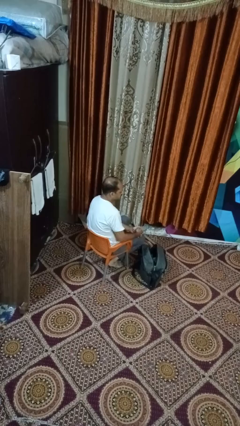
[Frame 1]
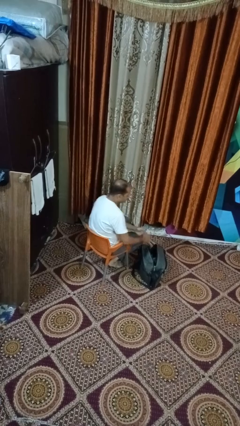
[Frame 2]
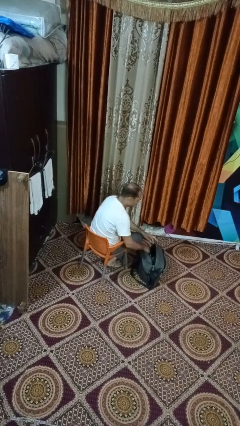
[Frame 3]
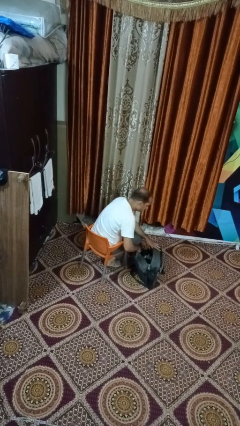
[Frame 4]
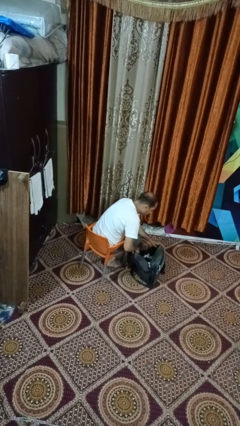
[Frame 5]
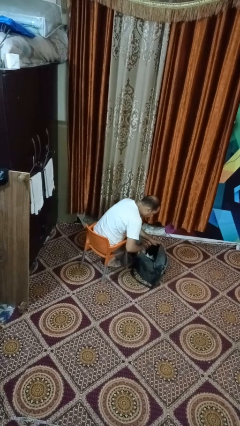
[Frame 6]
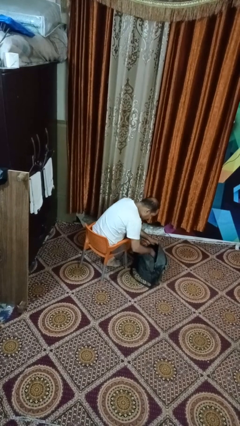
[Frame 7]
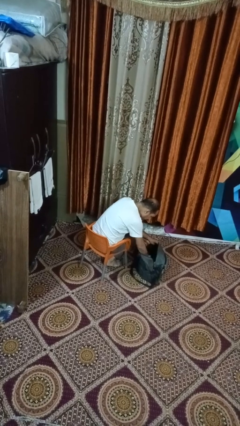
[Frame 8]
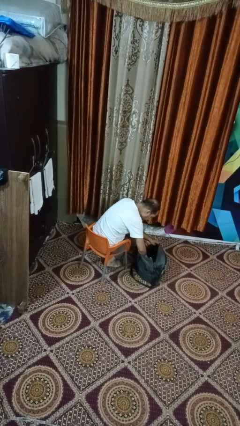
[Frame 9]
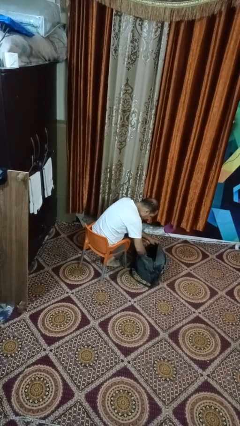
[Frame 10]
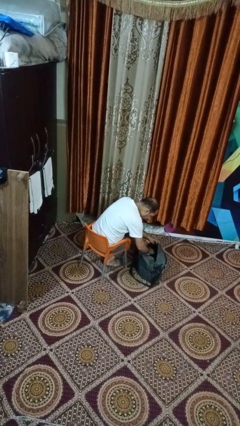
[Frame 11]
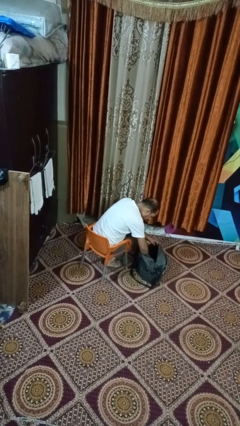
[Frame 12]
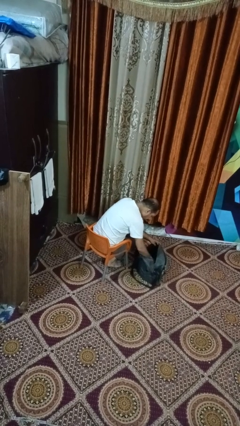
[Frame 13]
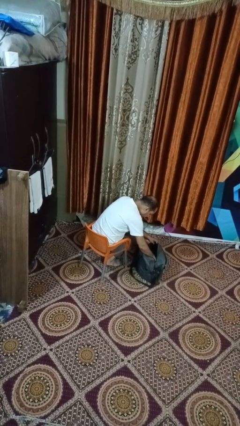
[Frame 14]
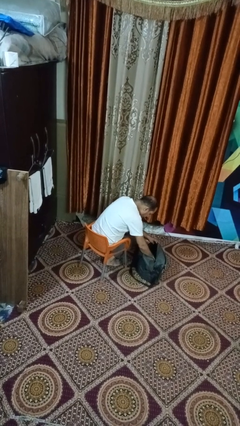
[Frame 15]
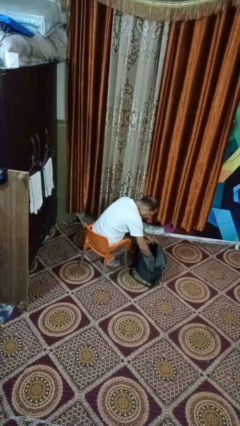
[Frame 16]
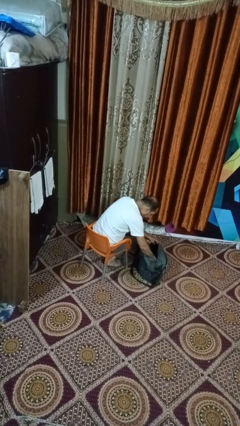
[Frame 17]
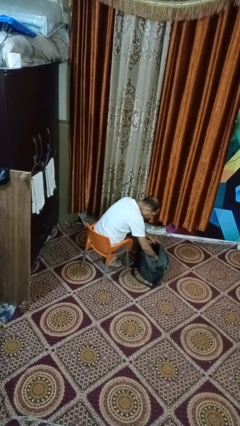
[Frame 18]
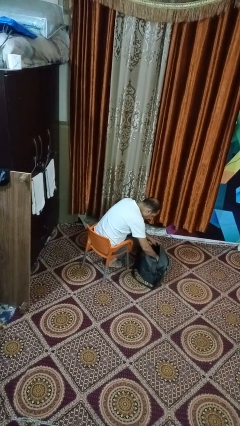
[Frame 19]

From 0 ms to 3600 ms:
person searches in backpack

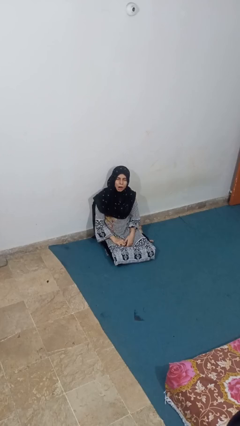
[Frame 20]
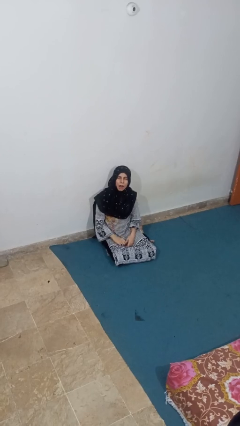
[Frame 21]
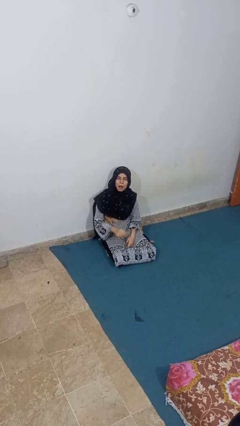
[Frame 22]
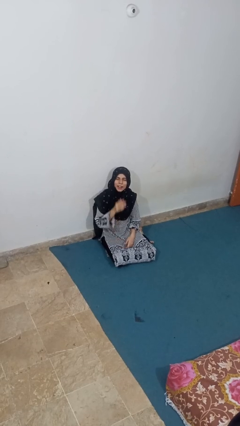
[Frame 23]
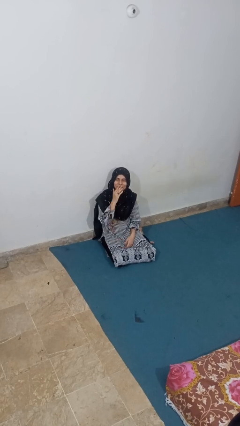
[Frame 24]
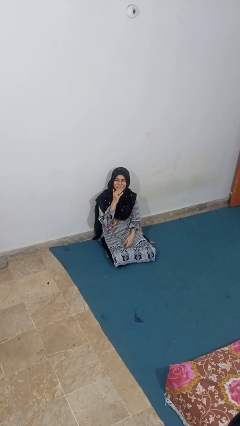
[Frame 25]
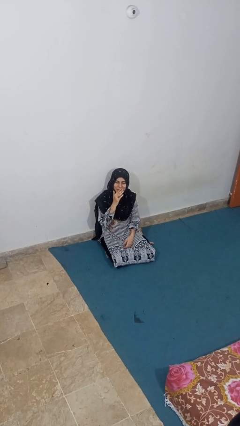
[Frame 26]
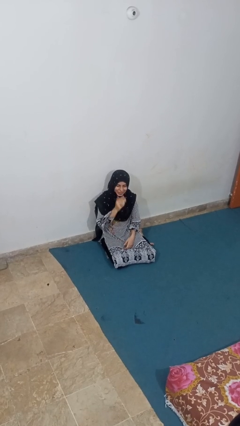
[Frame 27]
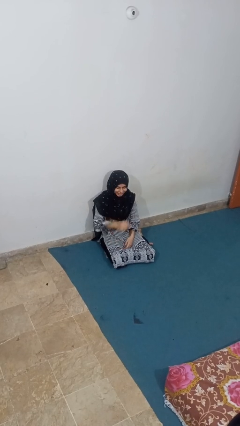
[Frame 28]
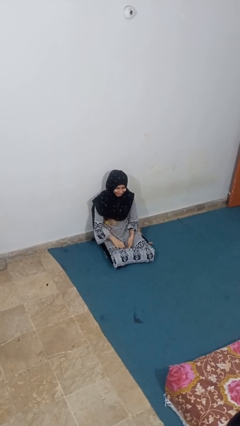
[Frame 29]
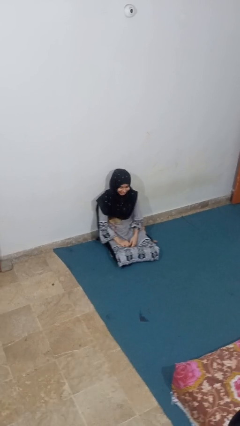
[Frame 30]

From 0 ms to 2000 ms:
person yawns

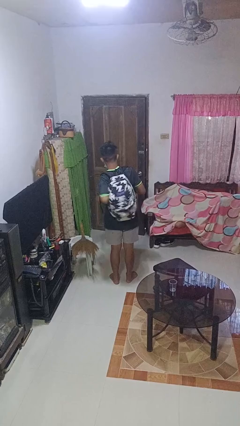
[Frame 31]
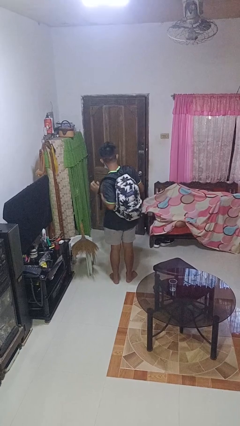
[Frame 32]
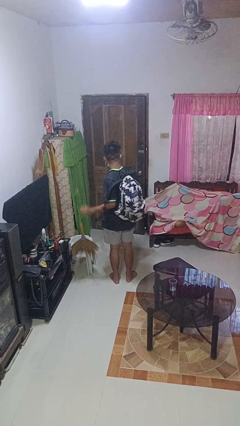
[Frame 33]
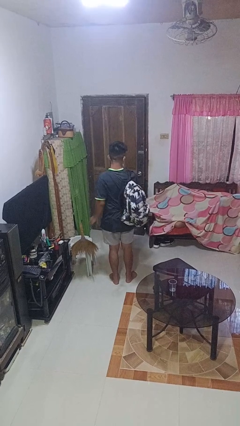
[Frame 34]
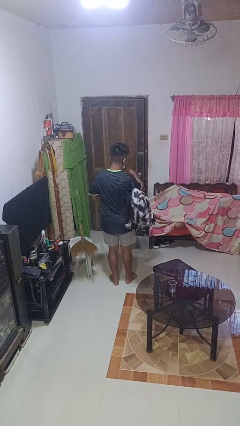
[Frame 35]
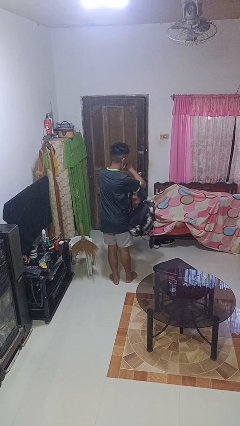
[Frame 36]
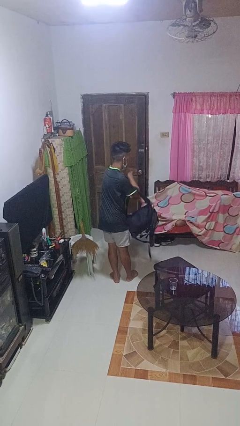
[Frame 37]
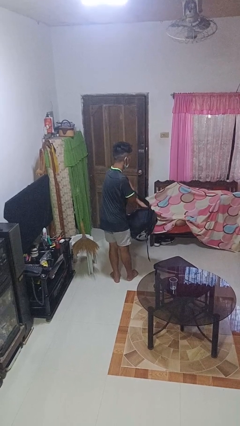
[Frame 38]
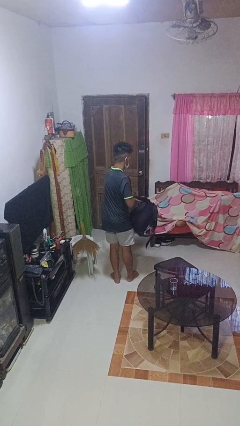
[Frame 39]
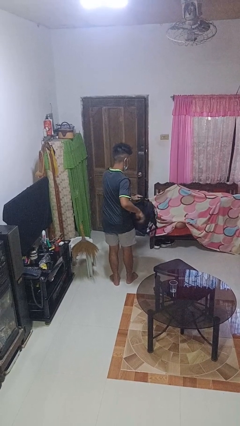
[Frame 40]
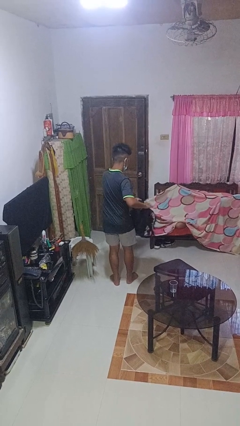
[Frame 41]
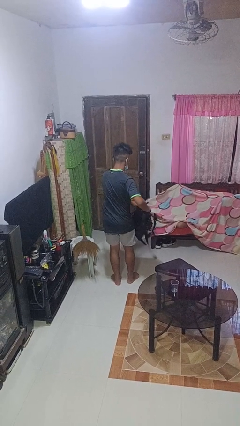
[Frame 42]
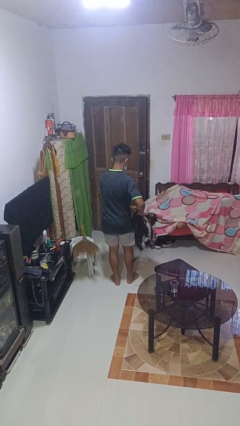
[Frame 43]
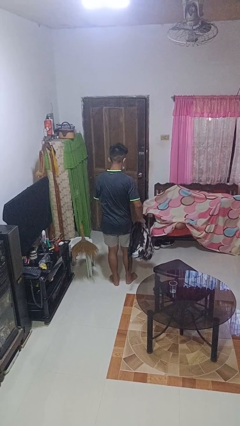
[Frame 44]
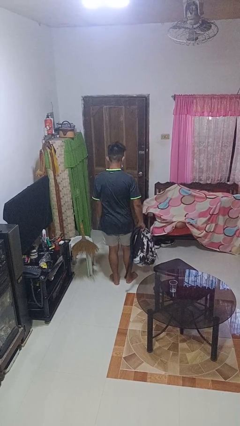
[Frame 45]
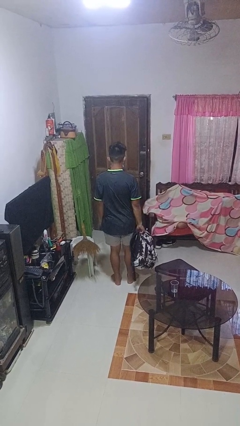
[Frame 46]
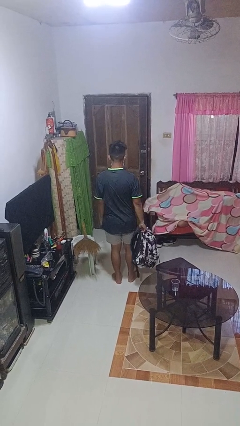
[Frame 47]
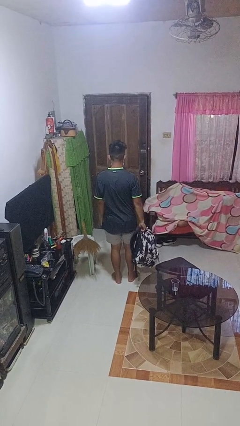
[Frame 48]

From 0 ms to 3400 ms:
person takes off backpack

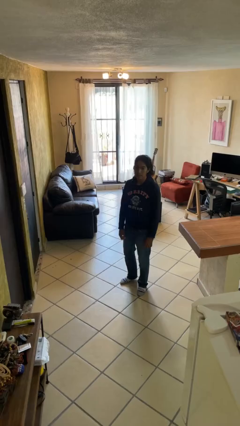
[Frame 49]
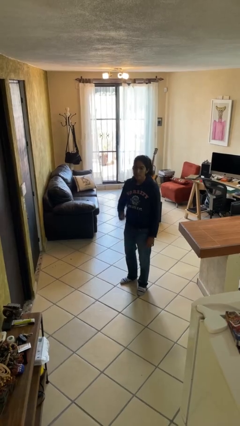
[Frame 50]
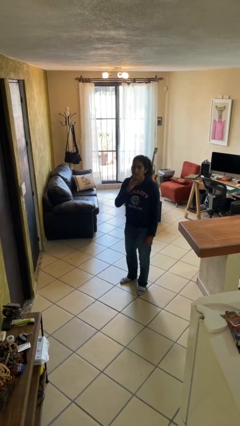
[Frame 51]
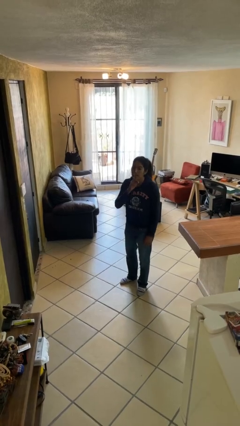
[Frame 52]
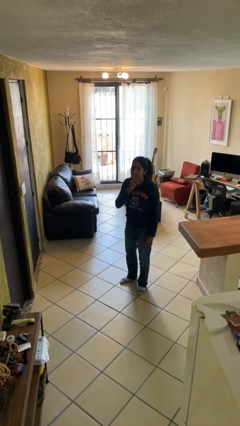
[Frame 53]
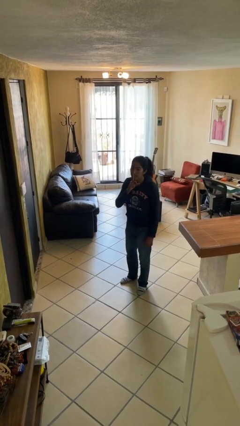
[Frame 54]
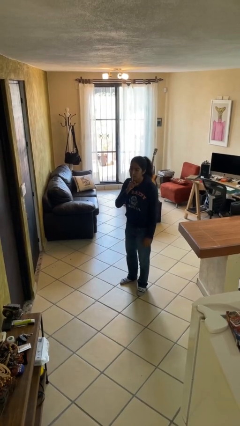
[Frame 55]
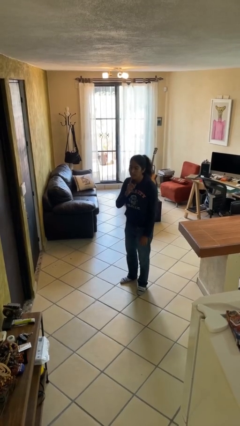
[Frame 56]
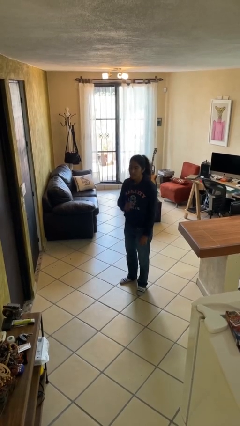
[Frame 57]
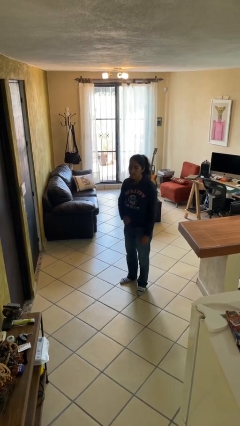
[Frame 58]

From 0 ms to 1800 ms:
person gestures be quiet

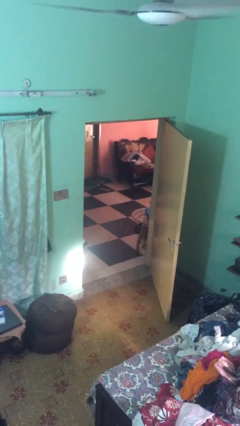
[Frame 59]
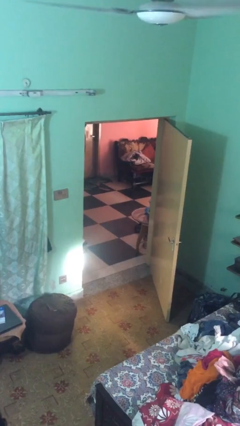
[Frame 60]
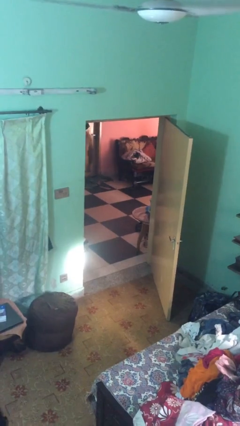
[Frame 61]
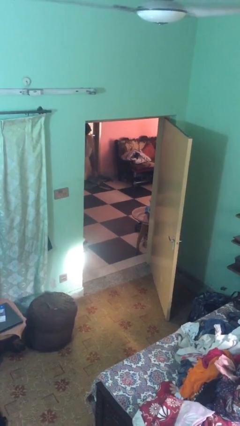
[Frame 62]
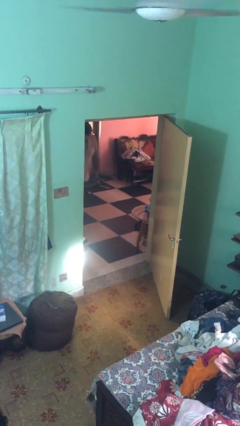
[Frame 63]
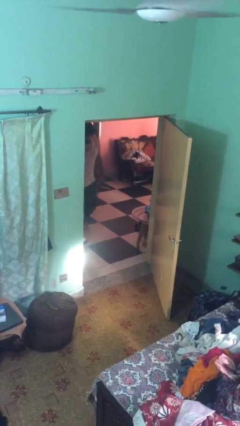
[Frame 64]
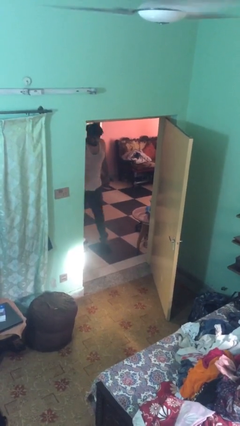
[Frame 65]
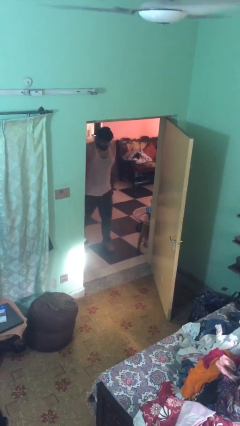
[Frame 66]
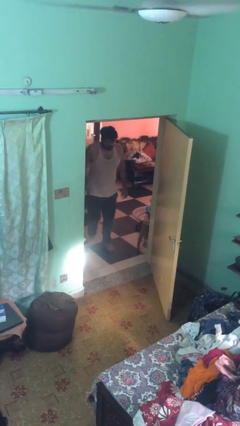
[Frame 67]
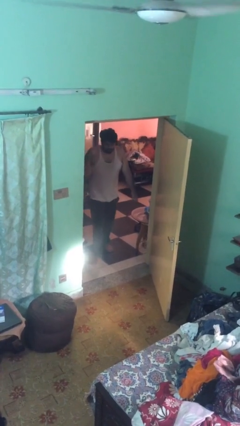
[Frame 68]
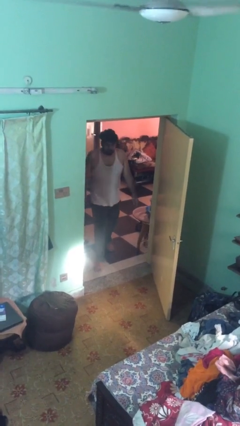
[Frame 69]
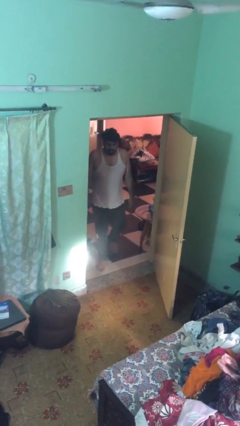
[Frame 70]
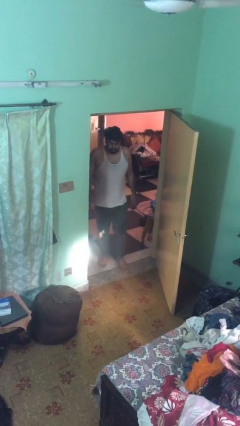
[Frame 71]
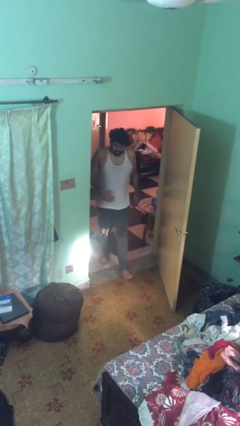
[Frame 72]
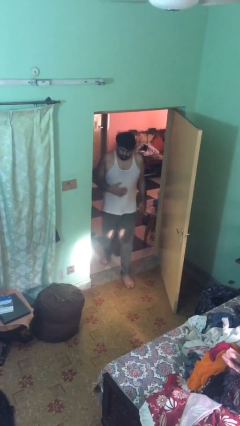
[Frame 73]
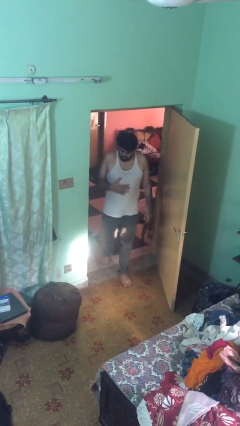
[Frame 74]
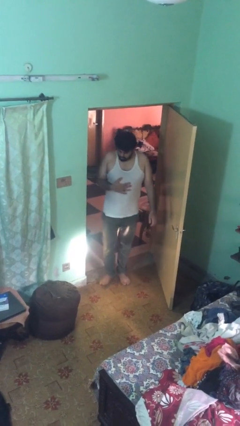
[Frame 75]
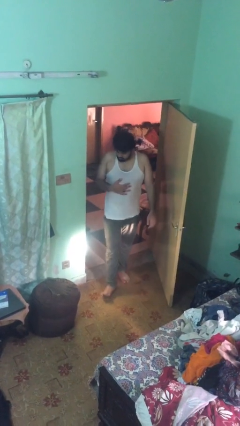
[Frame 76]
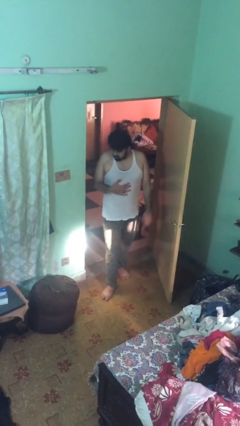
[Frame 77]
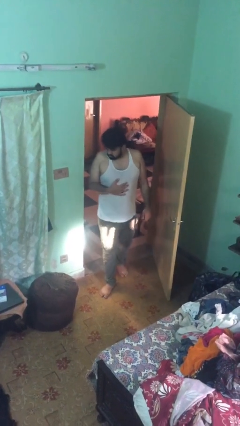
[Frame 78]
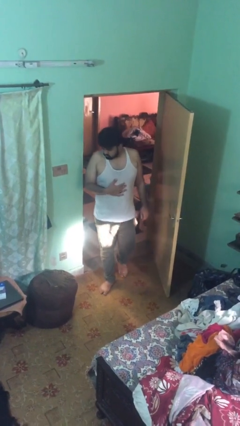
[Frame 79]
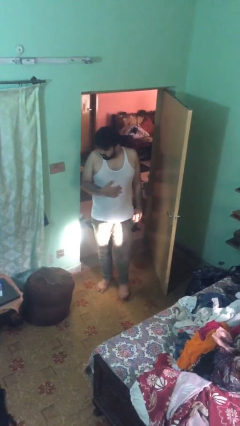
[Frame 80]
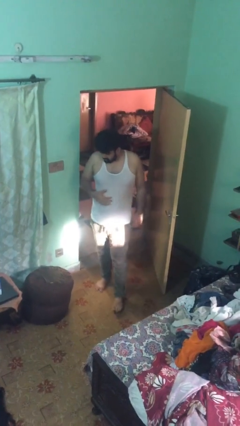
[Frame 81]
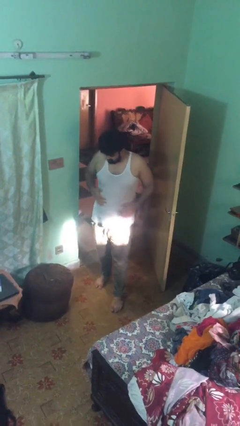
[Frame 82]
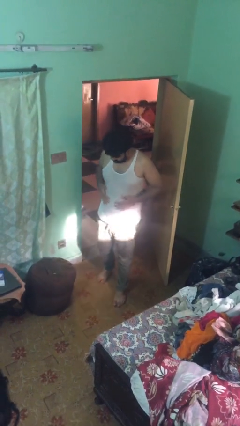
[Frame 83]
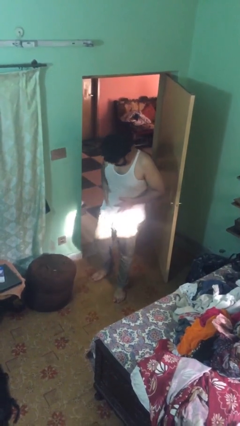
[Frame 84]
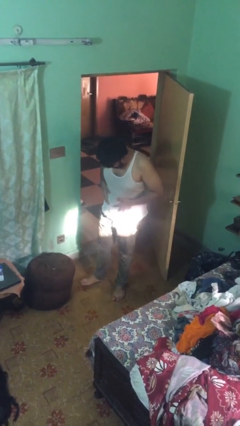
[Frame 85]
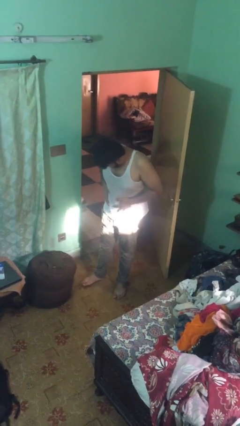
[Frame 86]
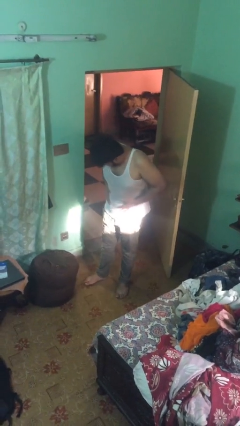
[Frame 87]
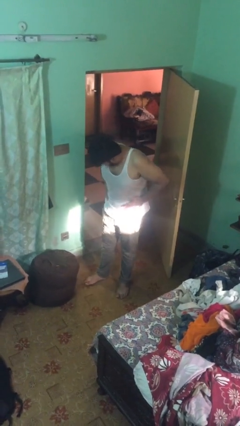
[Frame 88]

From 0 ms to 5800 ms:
person enters scene through structure

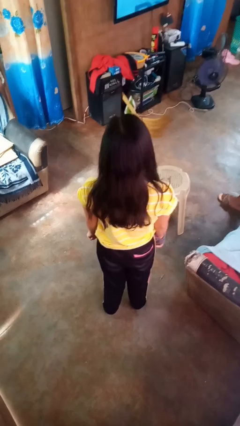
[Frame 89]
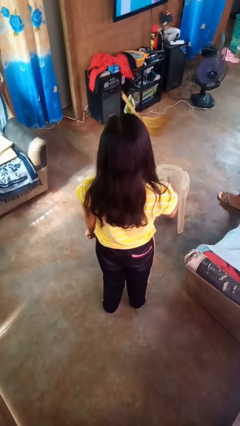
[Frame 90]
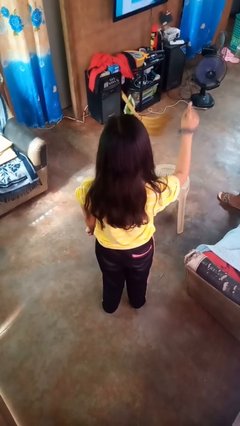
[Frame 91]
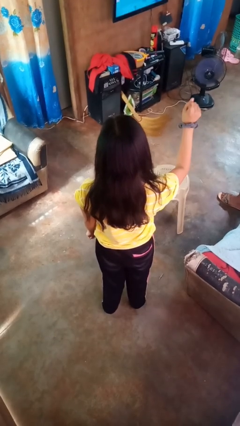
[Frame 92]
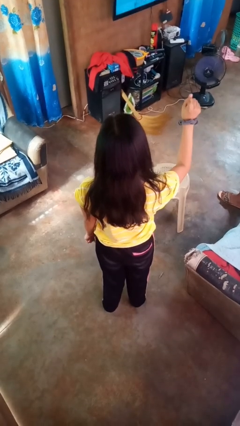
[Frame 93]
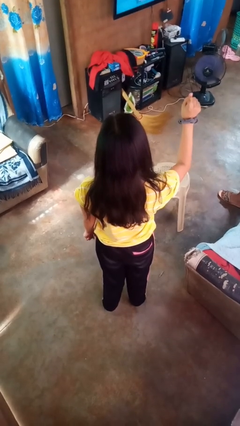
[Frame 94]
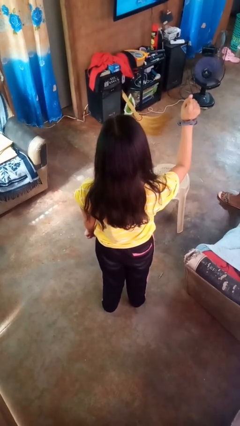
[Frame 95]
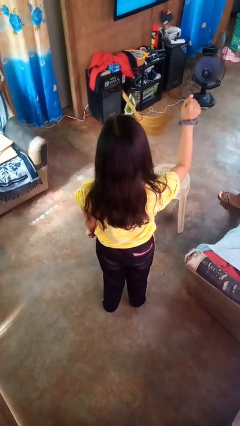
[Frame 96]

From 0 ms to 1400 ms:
person gestures number one
